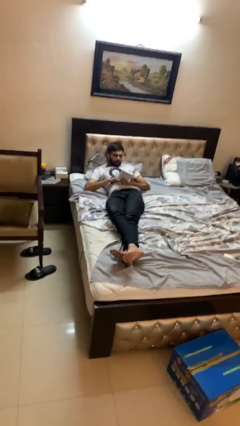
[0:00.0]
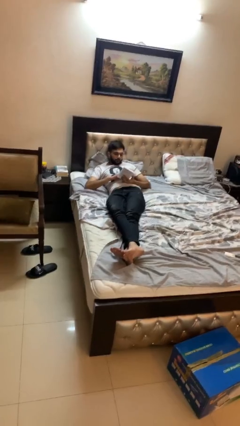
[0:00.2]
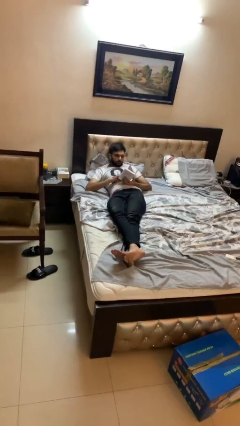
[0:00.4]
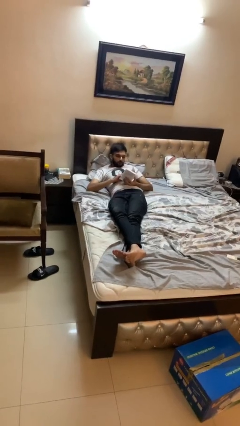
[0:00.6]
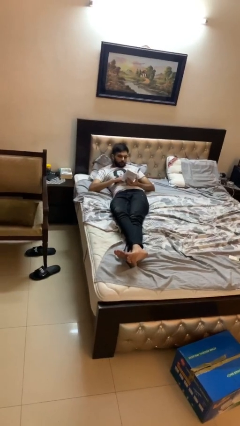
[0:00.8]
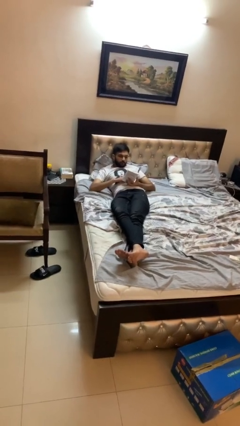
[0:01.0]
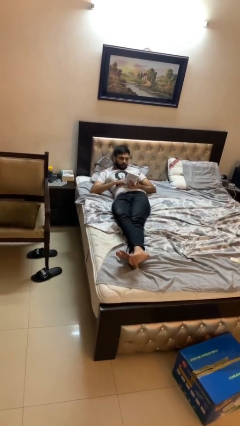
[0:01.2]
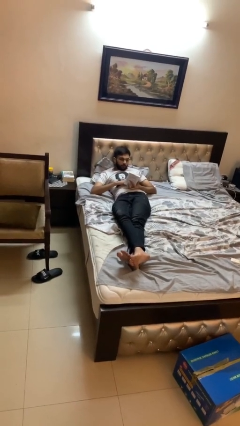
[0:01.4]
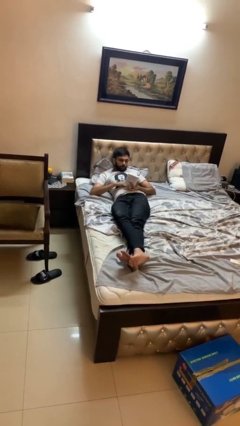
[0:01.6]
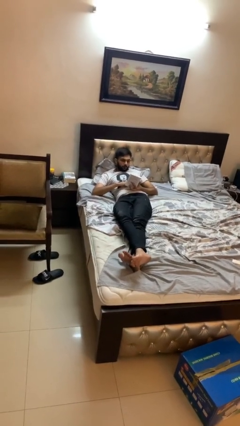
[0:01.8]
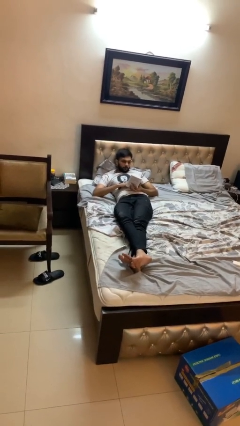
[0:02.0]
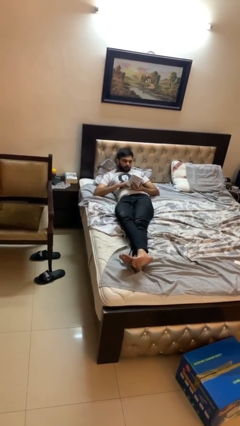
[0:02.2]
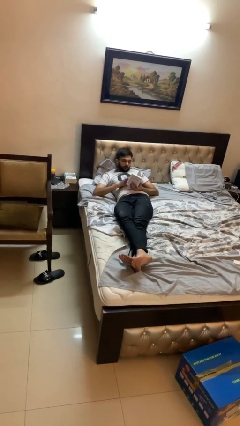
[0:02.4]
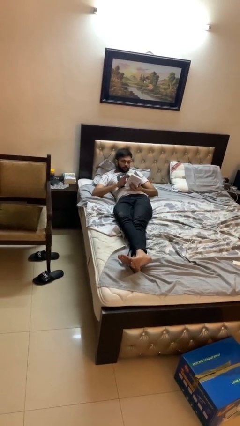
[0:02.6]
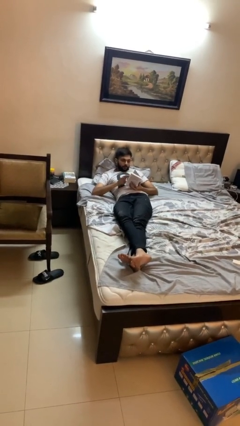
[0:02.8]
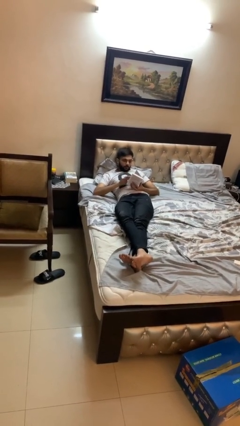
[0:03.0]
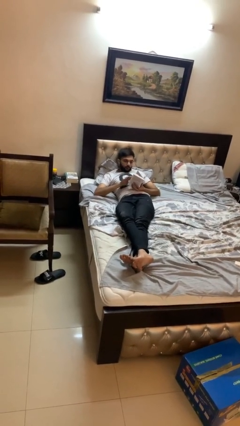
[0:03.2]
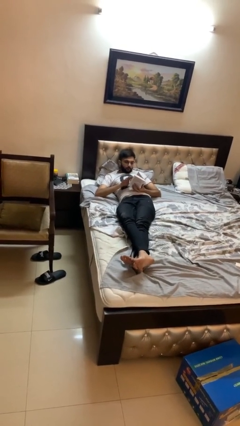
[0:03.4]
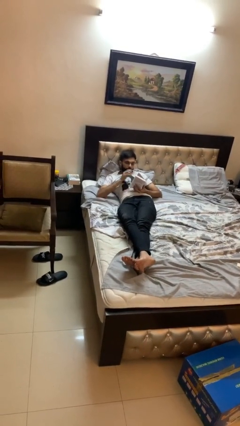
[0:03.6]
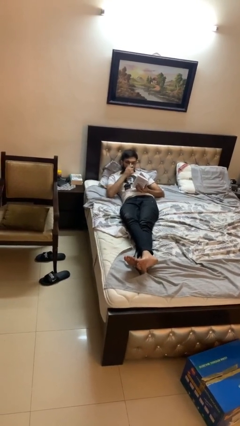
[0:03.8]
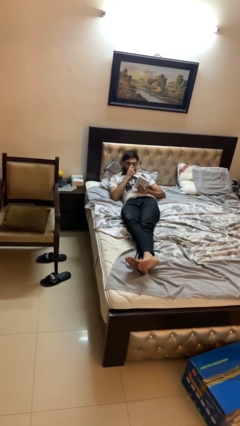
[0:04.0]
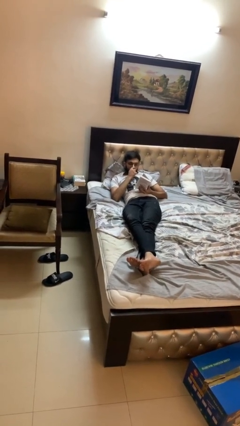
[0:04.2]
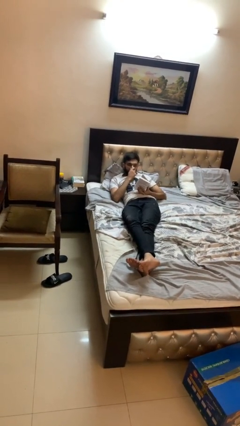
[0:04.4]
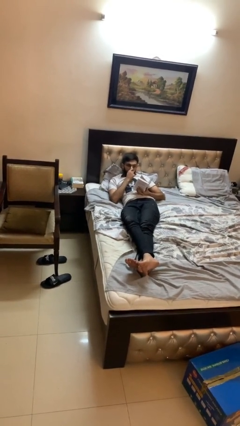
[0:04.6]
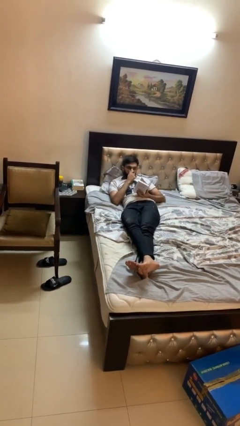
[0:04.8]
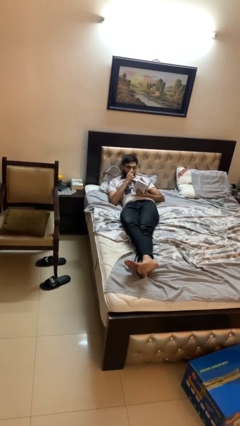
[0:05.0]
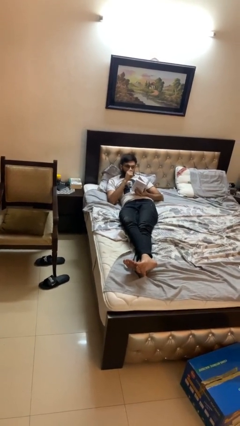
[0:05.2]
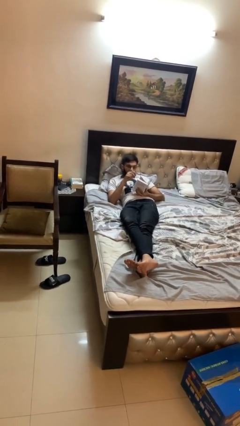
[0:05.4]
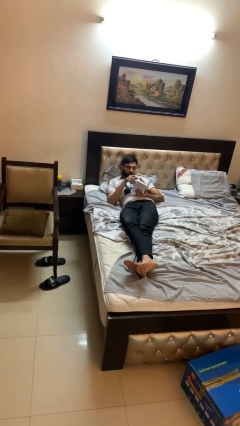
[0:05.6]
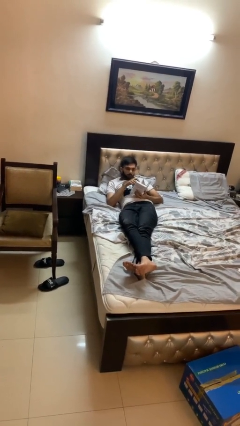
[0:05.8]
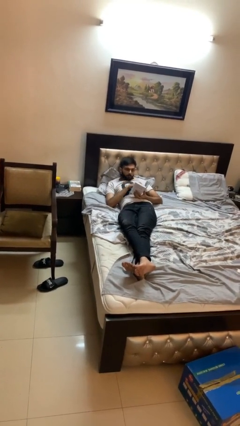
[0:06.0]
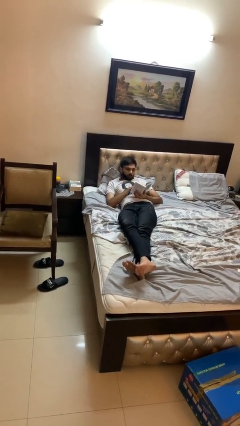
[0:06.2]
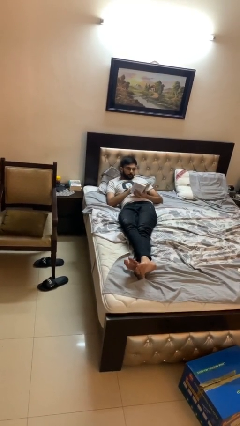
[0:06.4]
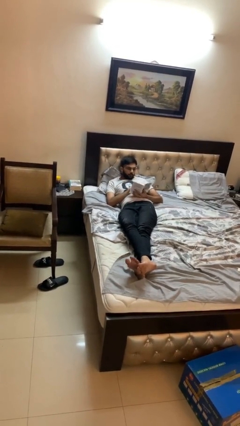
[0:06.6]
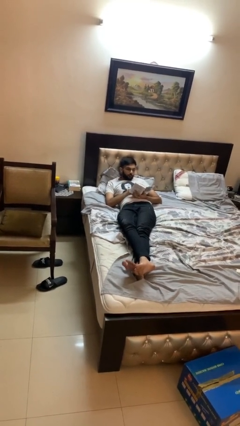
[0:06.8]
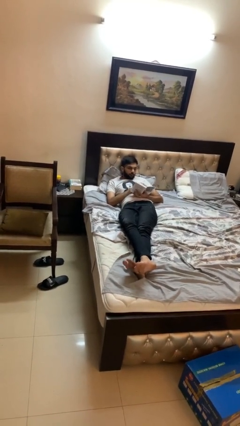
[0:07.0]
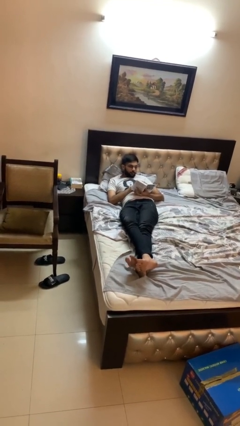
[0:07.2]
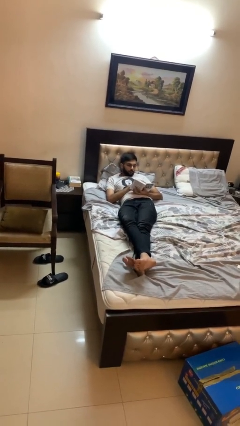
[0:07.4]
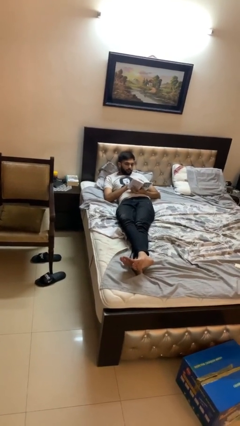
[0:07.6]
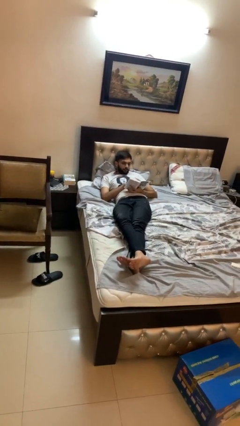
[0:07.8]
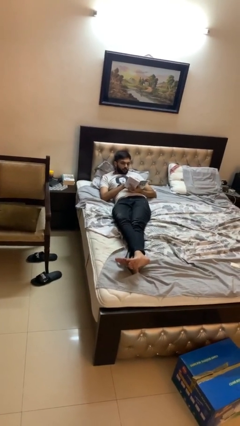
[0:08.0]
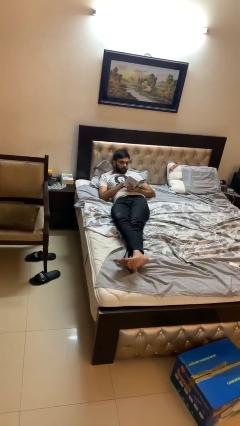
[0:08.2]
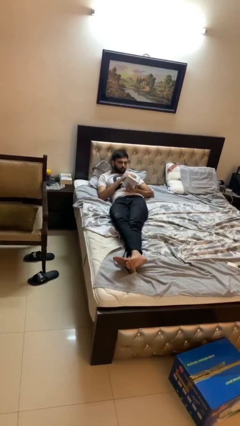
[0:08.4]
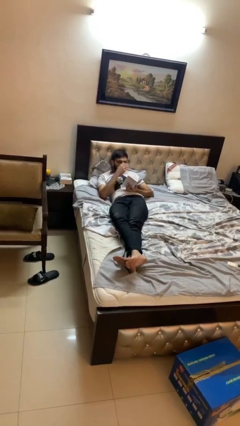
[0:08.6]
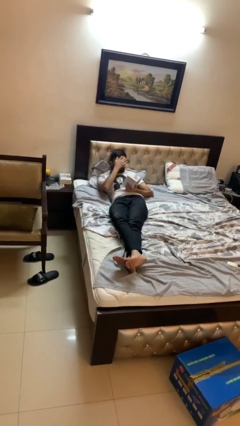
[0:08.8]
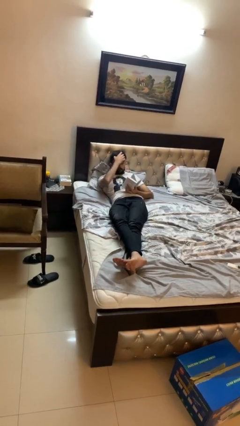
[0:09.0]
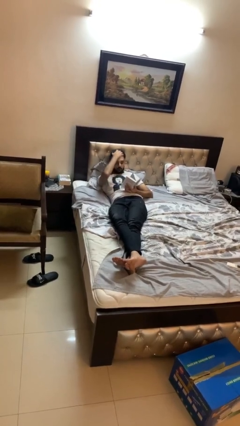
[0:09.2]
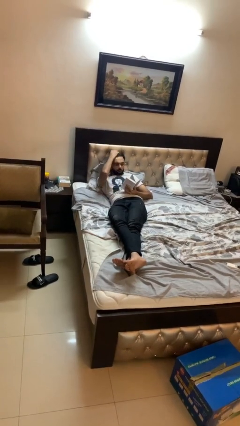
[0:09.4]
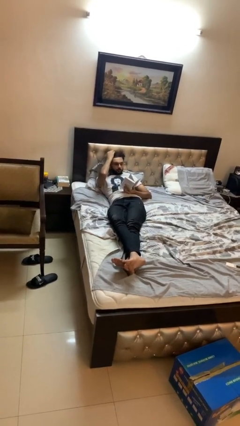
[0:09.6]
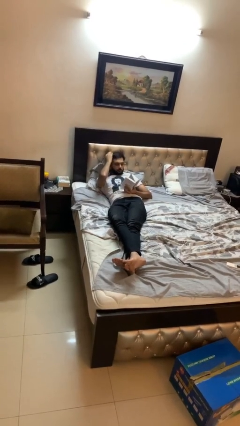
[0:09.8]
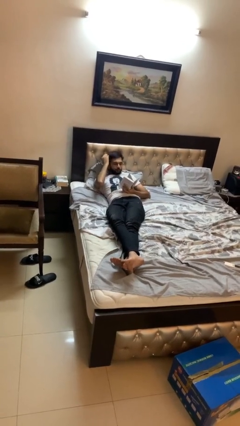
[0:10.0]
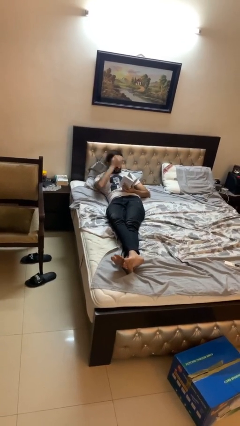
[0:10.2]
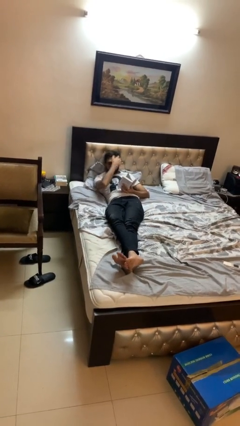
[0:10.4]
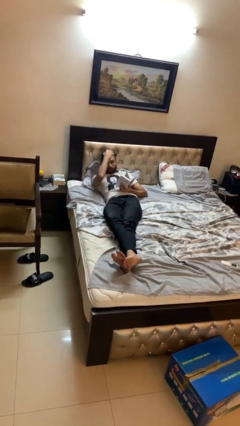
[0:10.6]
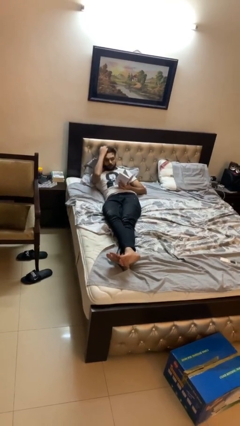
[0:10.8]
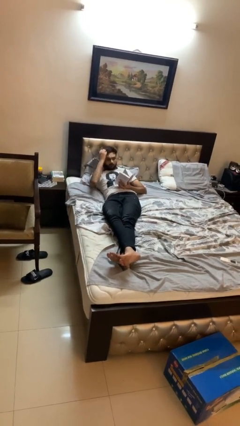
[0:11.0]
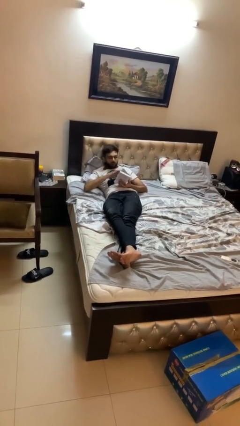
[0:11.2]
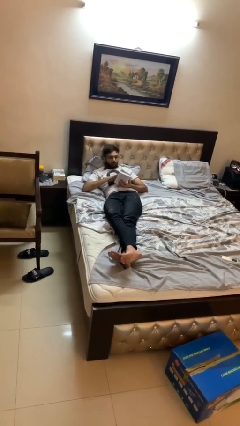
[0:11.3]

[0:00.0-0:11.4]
person reads document

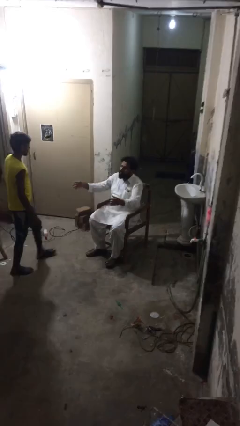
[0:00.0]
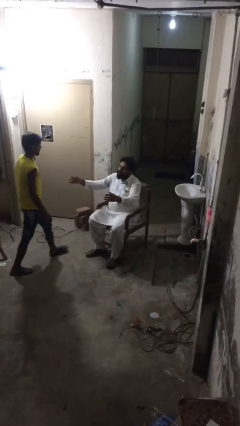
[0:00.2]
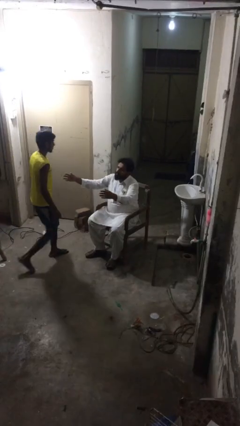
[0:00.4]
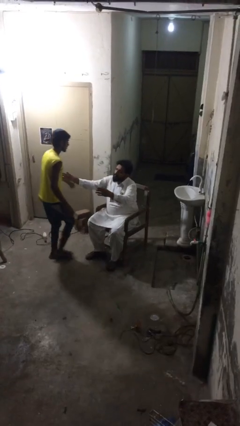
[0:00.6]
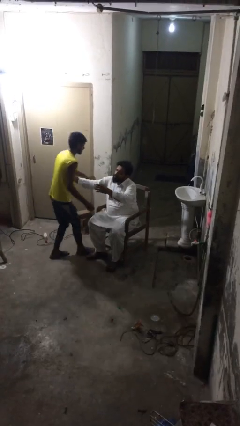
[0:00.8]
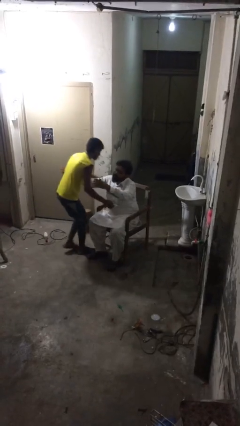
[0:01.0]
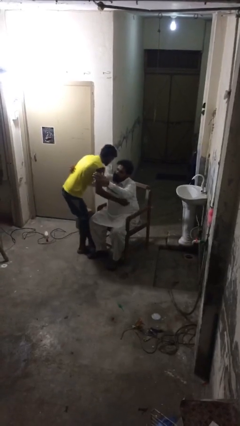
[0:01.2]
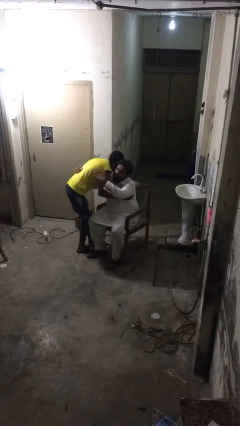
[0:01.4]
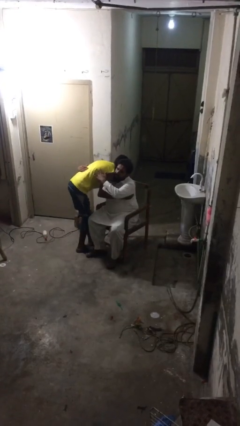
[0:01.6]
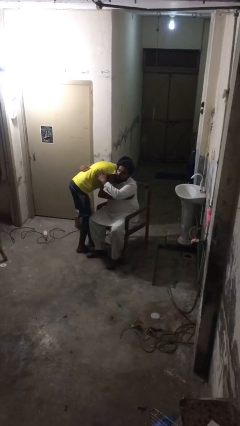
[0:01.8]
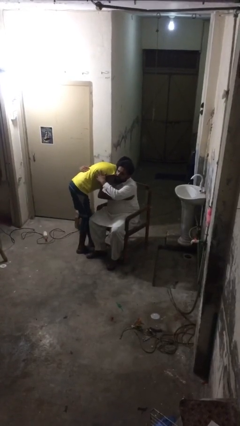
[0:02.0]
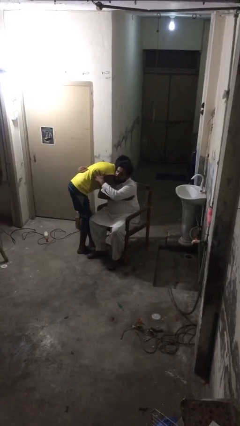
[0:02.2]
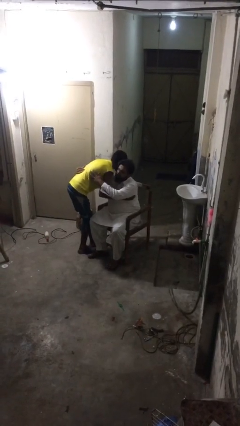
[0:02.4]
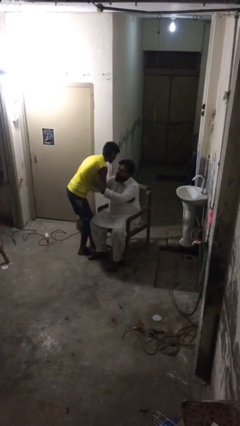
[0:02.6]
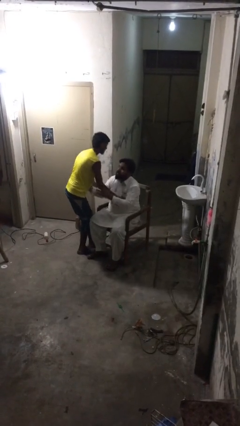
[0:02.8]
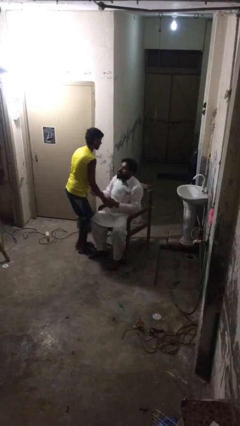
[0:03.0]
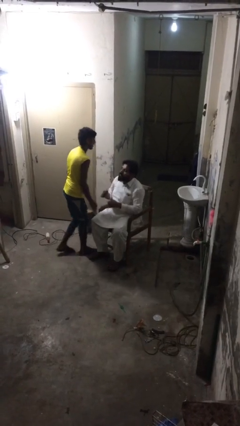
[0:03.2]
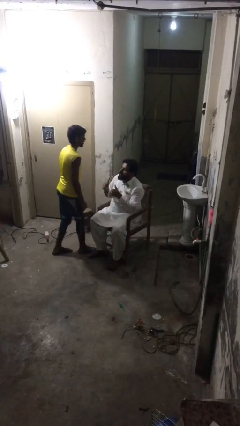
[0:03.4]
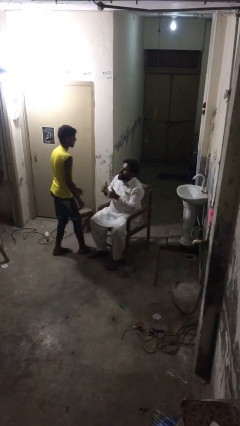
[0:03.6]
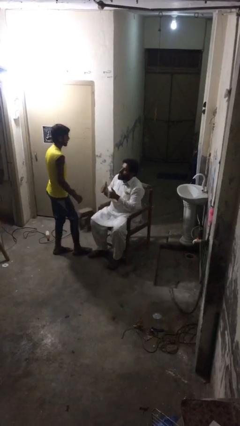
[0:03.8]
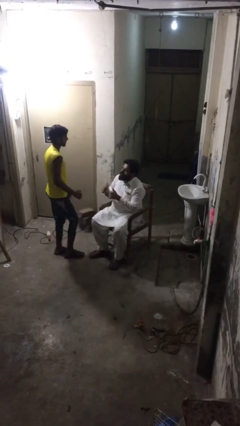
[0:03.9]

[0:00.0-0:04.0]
person embraces person

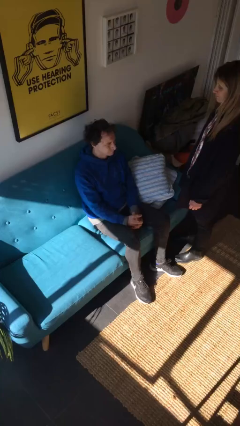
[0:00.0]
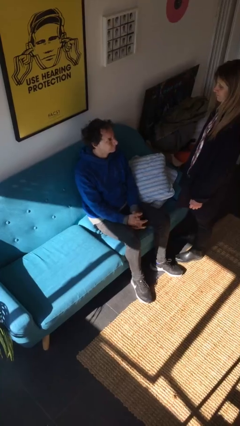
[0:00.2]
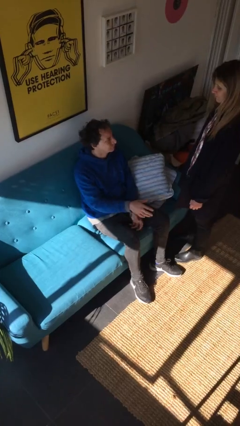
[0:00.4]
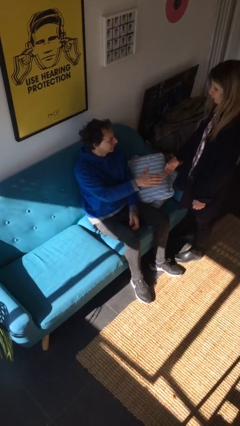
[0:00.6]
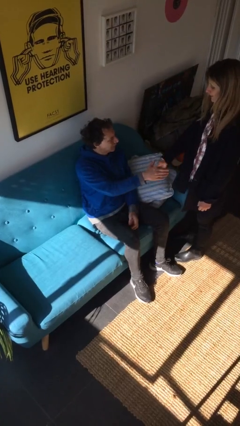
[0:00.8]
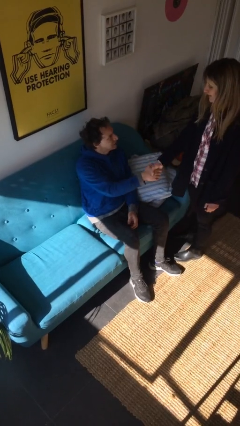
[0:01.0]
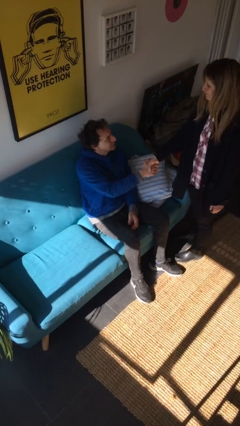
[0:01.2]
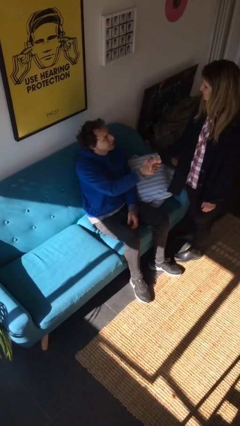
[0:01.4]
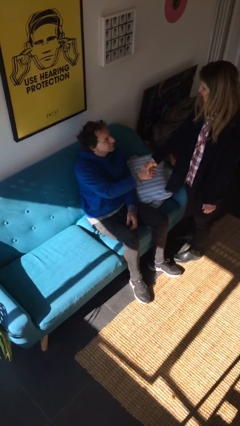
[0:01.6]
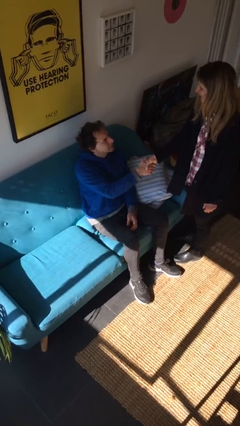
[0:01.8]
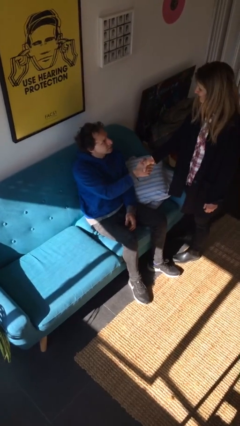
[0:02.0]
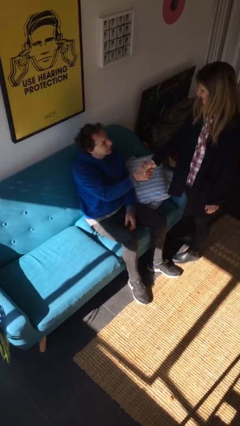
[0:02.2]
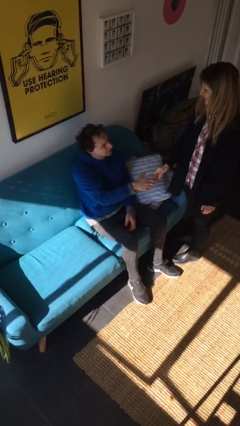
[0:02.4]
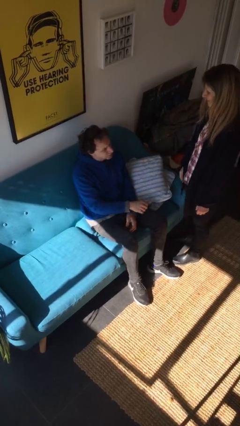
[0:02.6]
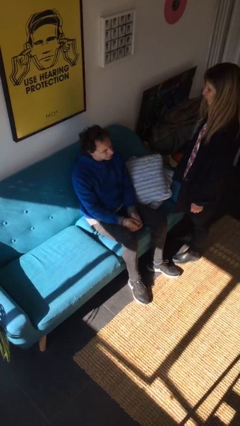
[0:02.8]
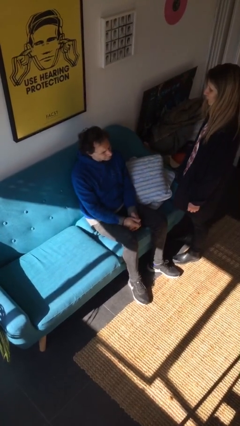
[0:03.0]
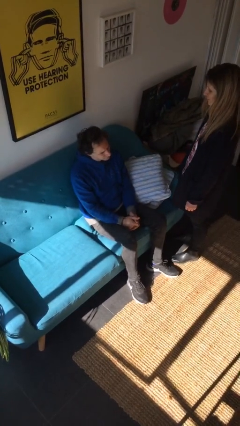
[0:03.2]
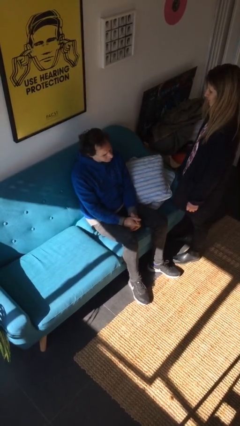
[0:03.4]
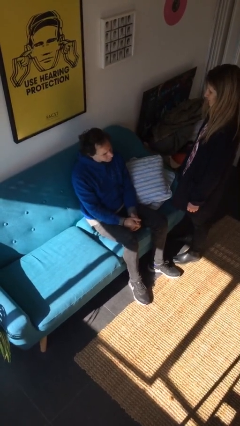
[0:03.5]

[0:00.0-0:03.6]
person shakes hand
